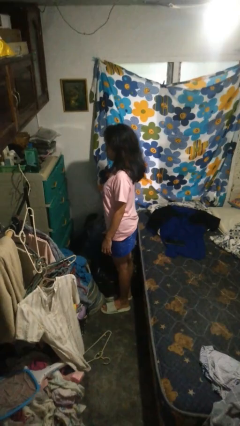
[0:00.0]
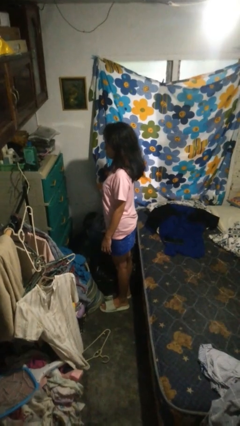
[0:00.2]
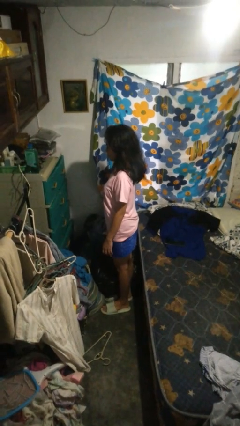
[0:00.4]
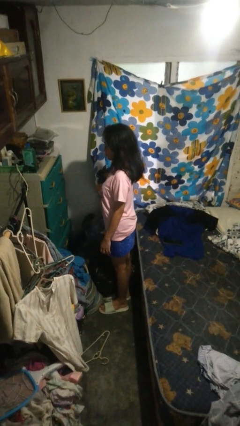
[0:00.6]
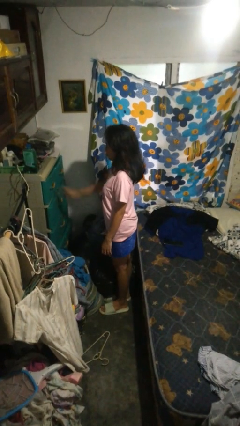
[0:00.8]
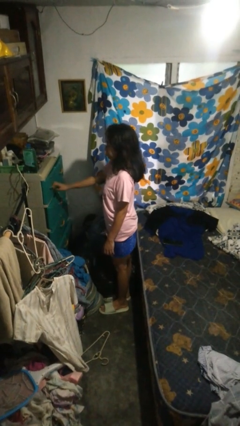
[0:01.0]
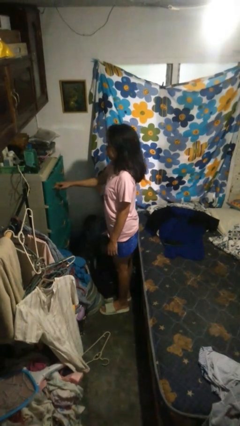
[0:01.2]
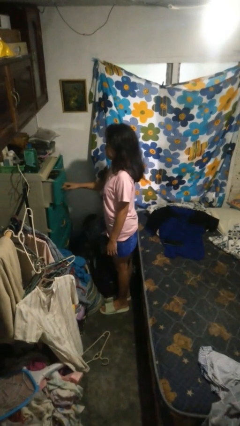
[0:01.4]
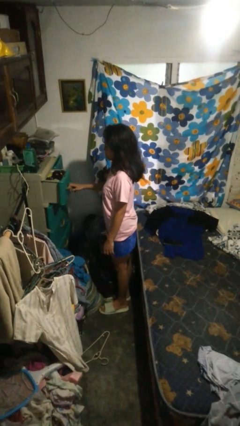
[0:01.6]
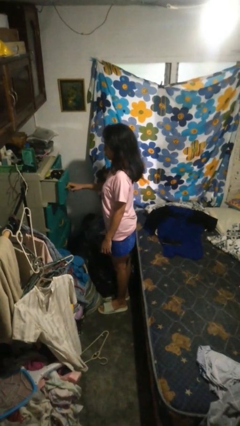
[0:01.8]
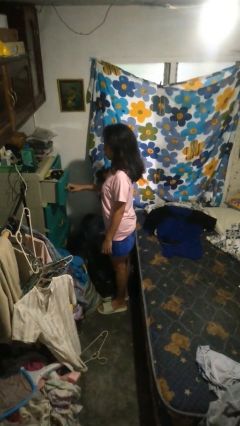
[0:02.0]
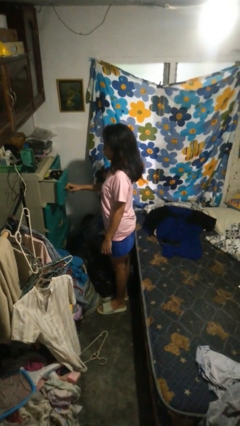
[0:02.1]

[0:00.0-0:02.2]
person opens dresser drawer

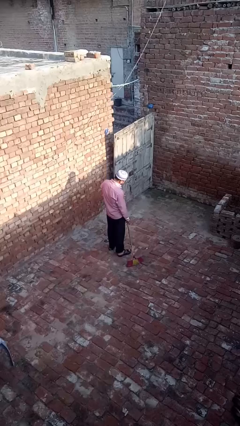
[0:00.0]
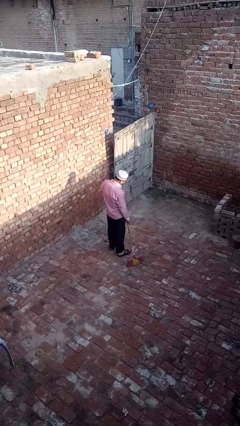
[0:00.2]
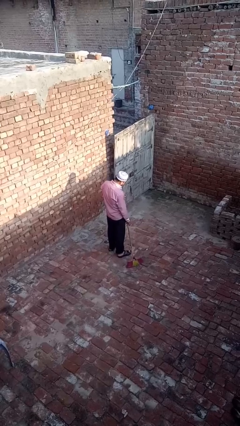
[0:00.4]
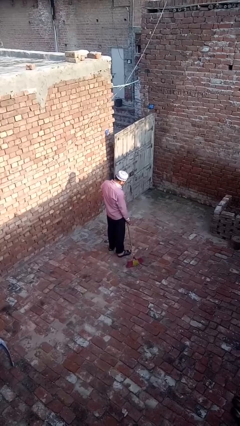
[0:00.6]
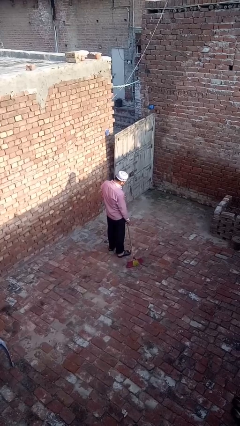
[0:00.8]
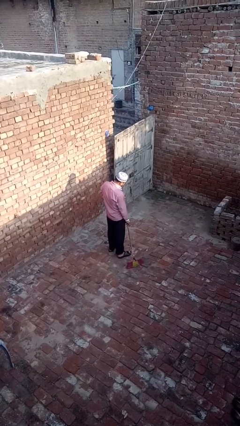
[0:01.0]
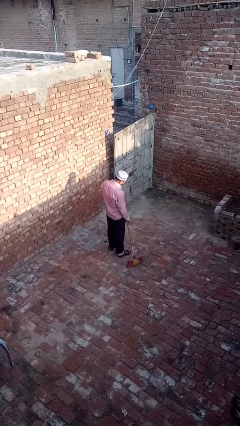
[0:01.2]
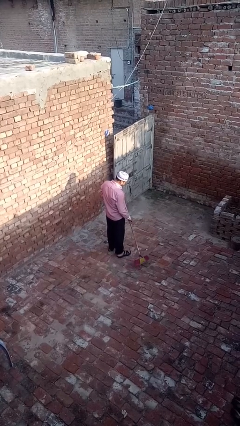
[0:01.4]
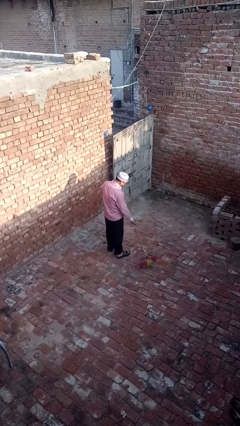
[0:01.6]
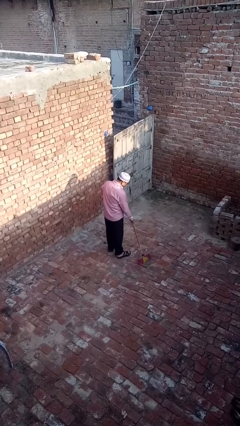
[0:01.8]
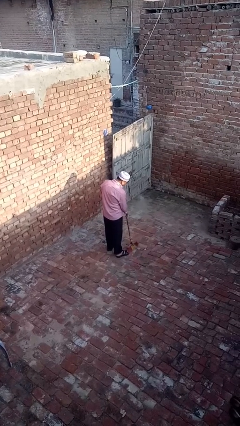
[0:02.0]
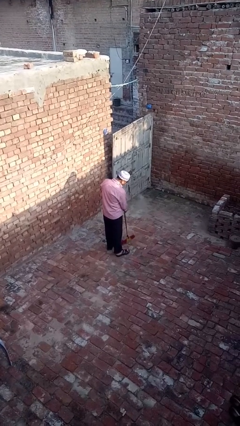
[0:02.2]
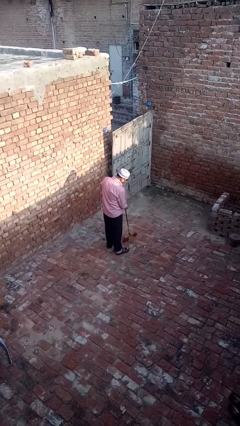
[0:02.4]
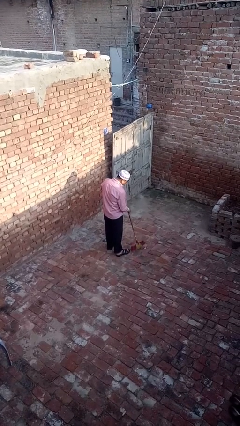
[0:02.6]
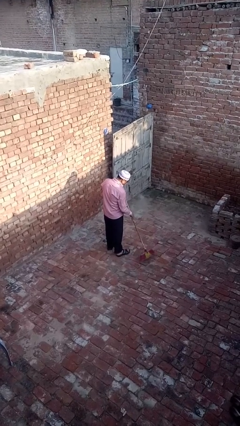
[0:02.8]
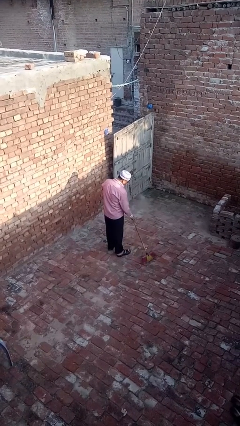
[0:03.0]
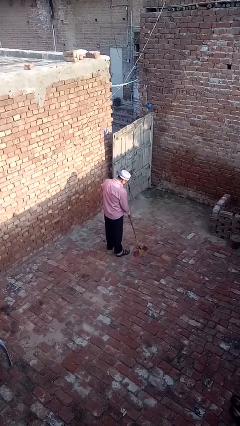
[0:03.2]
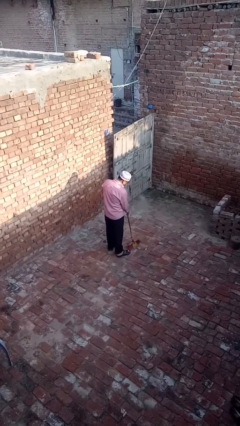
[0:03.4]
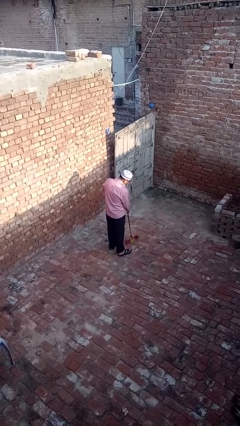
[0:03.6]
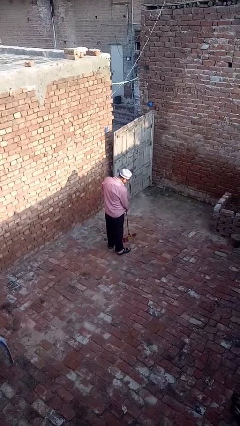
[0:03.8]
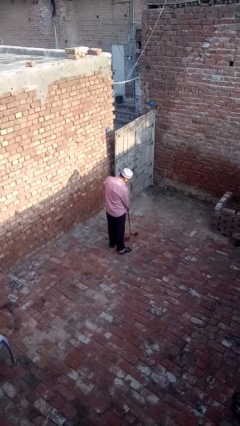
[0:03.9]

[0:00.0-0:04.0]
person sweeps floor

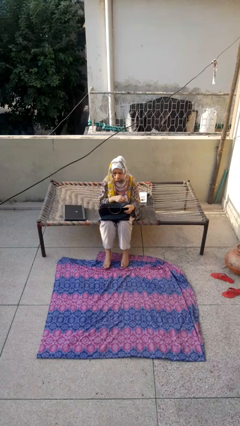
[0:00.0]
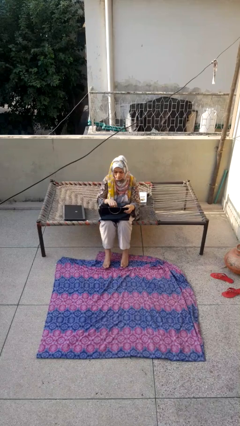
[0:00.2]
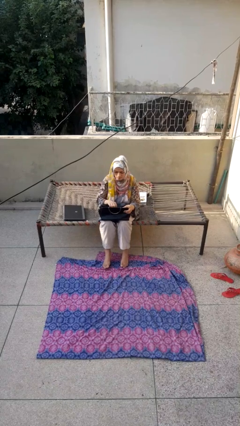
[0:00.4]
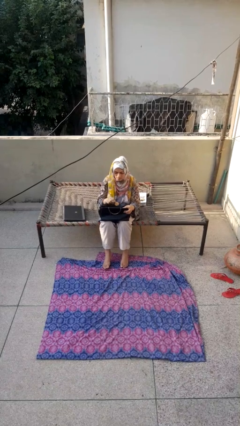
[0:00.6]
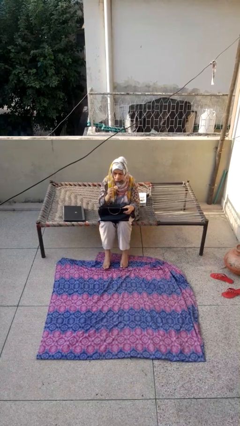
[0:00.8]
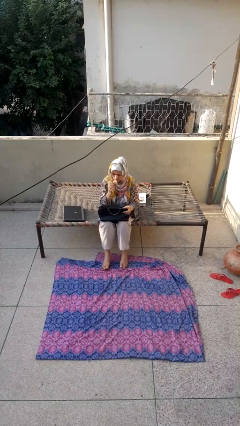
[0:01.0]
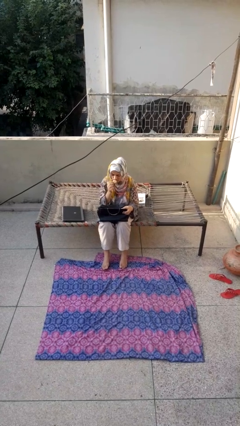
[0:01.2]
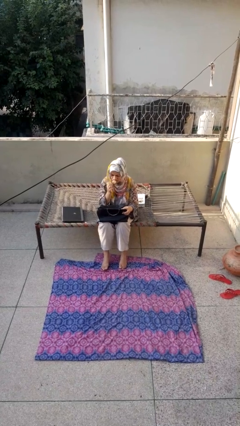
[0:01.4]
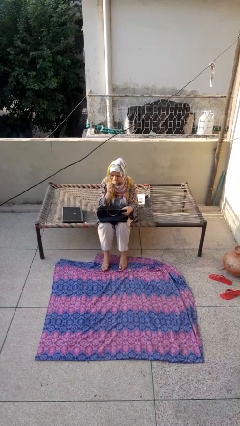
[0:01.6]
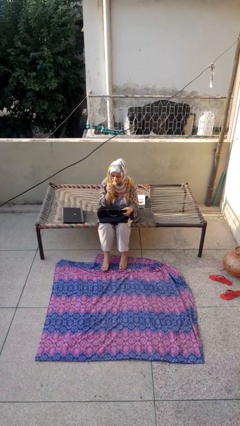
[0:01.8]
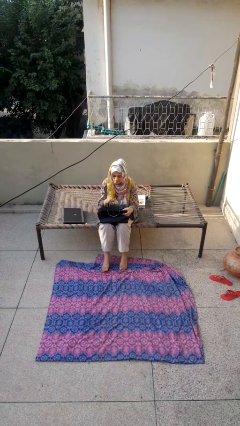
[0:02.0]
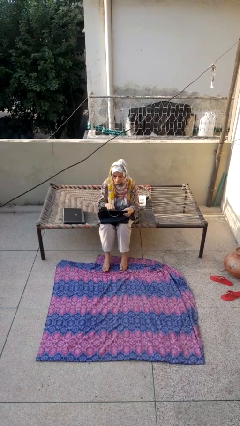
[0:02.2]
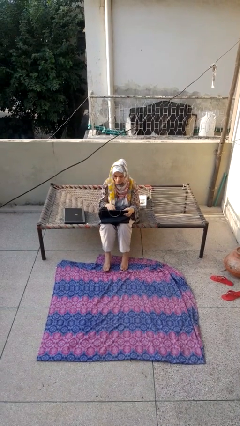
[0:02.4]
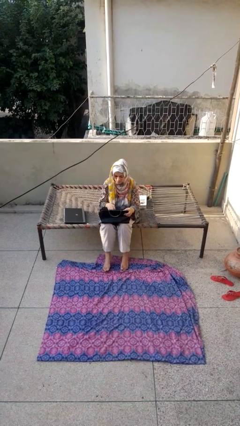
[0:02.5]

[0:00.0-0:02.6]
person eats snack from bag

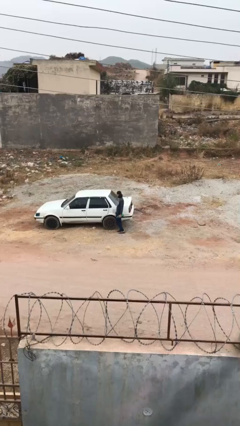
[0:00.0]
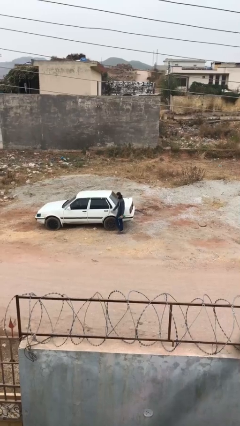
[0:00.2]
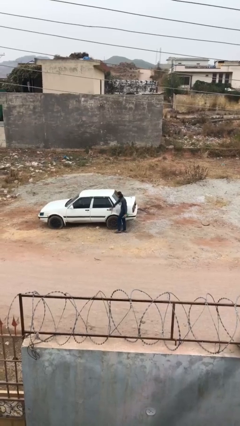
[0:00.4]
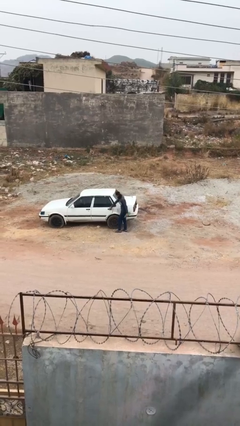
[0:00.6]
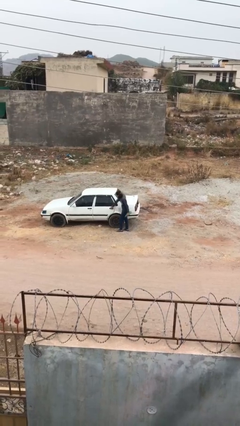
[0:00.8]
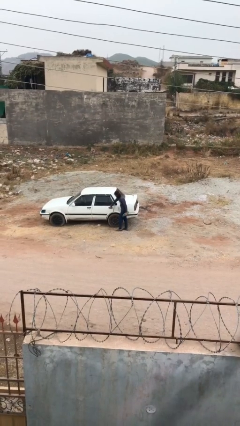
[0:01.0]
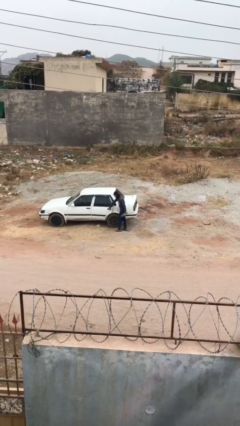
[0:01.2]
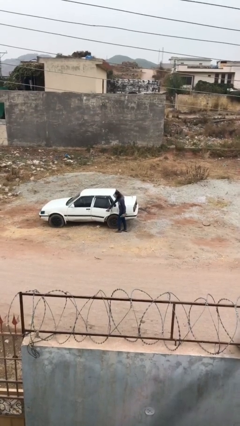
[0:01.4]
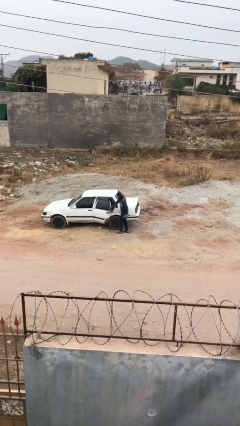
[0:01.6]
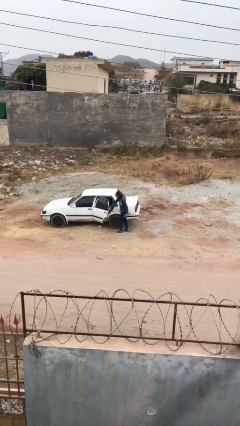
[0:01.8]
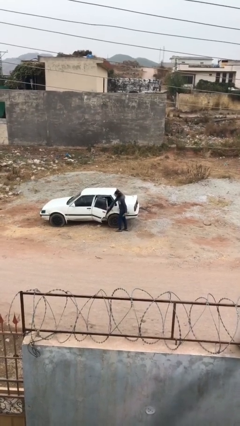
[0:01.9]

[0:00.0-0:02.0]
person opens car door

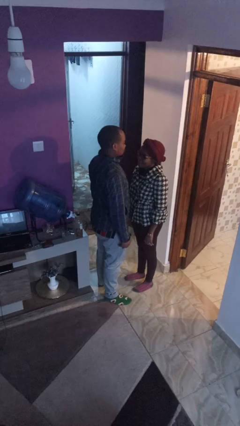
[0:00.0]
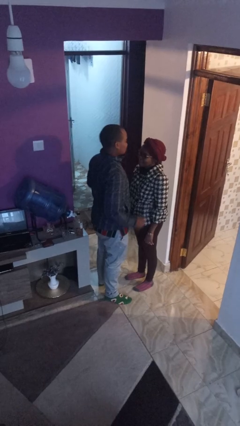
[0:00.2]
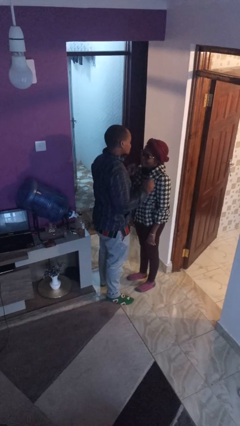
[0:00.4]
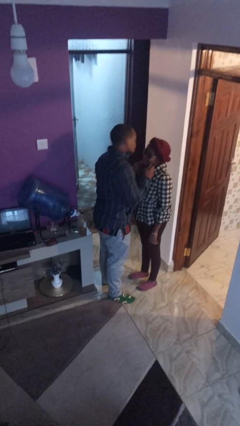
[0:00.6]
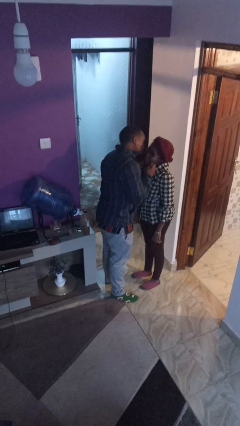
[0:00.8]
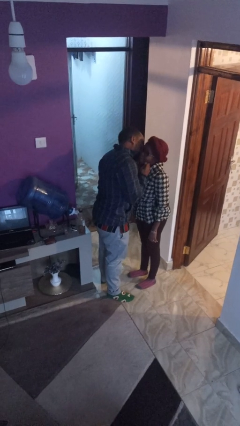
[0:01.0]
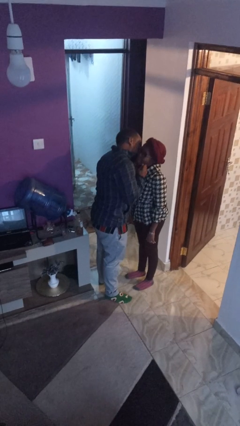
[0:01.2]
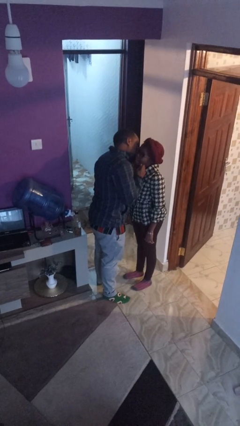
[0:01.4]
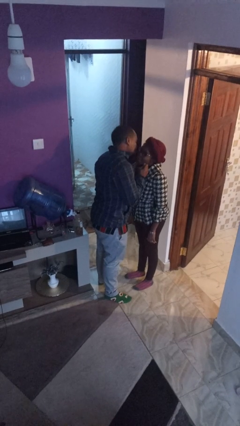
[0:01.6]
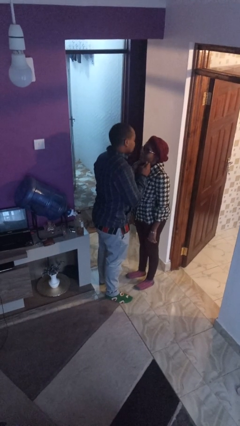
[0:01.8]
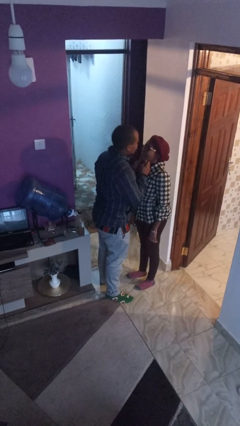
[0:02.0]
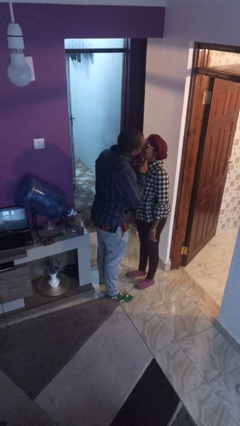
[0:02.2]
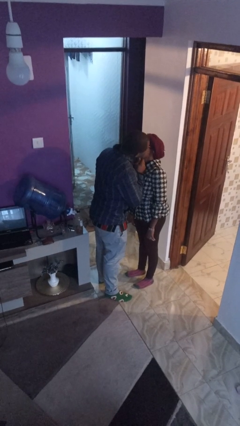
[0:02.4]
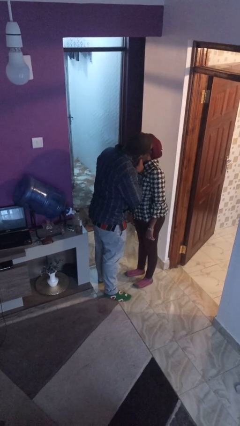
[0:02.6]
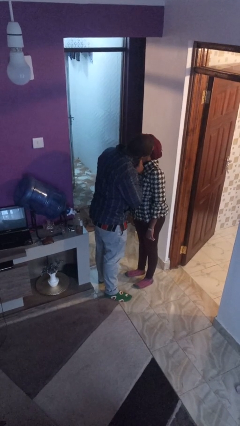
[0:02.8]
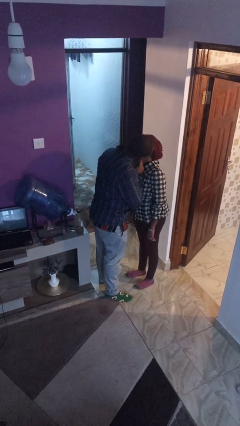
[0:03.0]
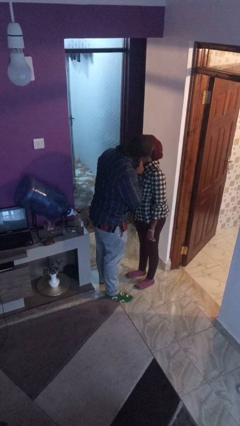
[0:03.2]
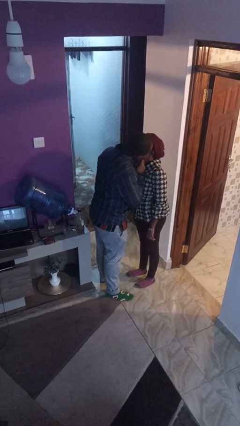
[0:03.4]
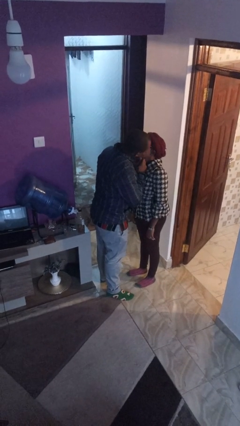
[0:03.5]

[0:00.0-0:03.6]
person kisses cheek of person

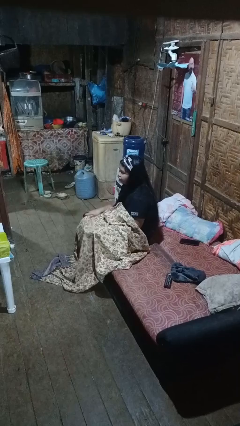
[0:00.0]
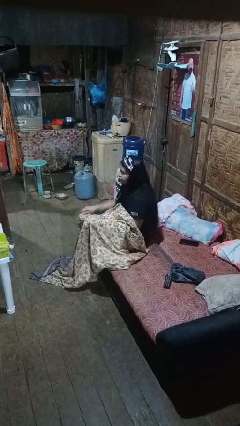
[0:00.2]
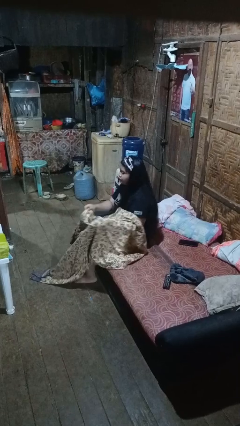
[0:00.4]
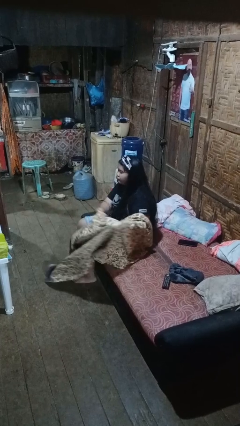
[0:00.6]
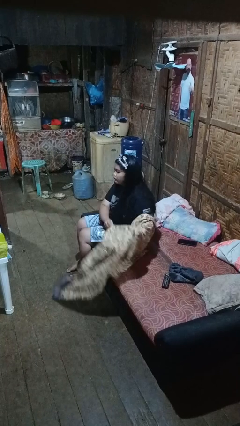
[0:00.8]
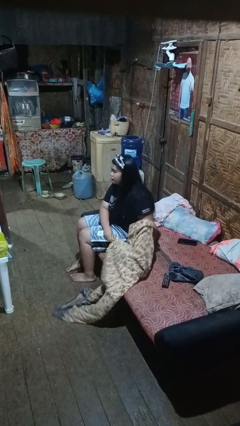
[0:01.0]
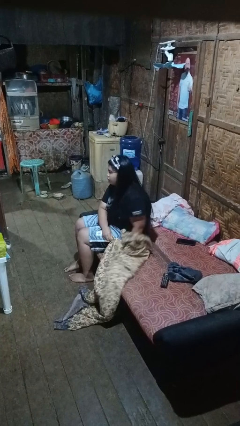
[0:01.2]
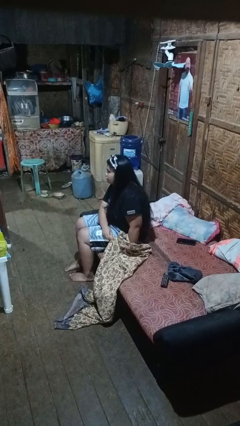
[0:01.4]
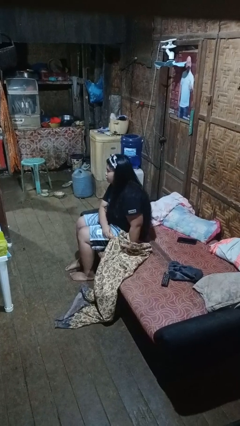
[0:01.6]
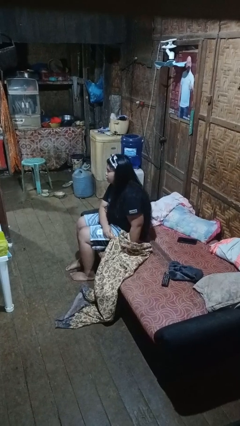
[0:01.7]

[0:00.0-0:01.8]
person uncovers with blanket

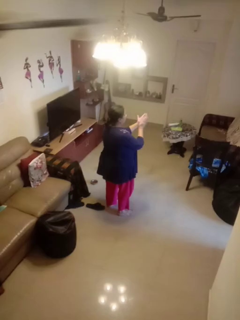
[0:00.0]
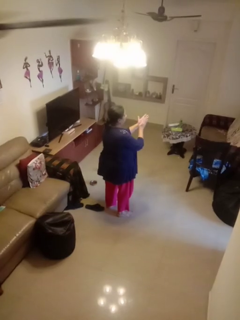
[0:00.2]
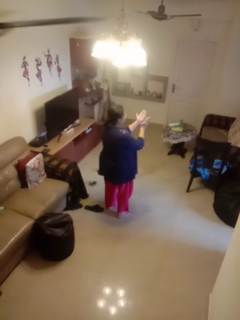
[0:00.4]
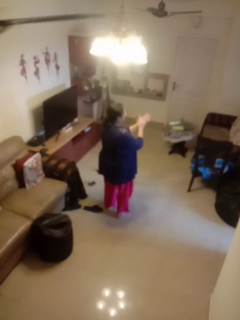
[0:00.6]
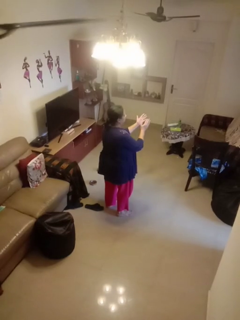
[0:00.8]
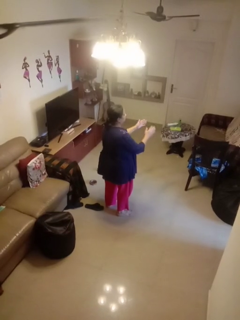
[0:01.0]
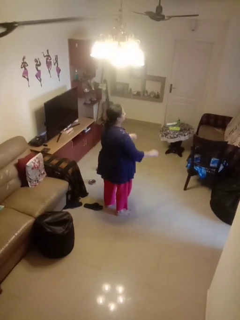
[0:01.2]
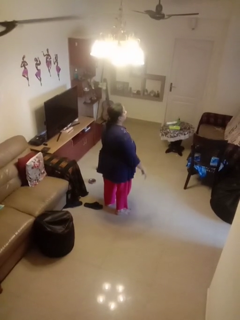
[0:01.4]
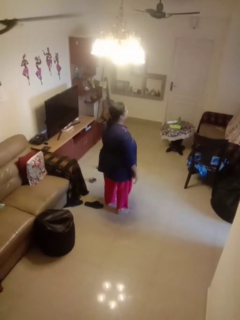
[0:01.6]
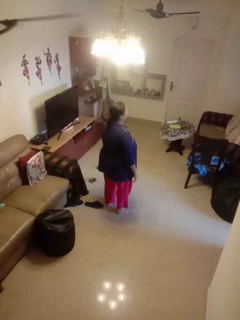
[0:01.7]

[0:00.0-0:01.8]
person claps hands
